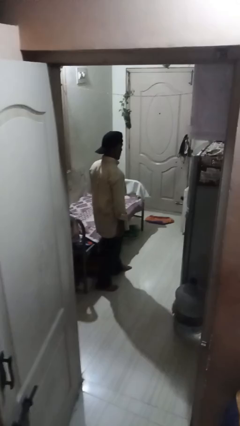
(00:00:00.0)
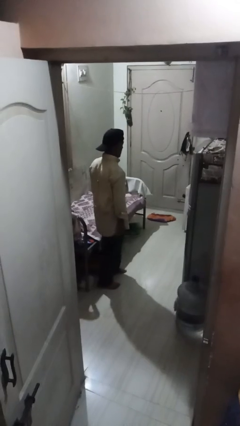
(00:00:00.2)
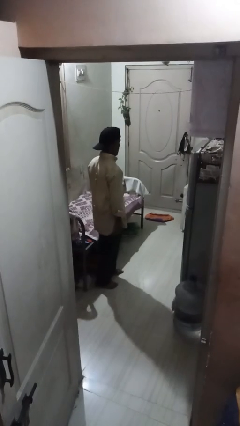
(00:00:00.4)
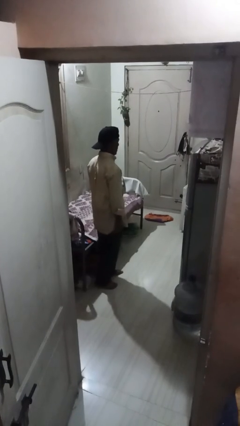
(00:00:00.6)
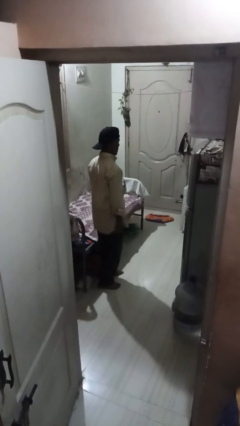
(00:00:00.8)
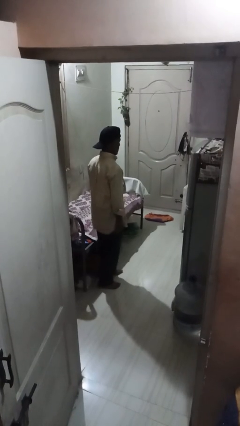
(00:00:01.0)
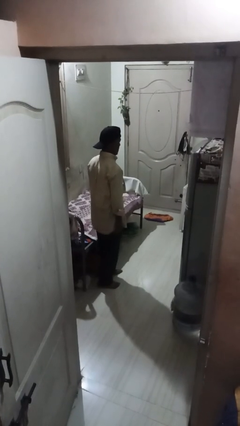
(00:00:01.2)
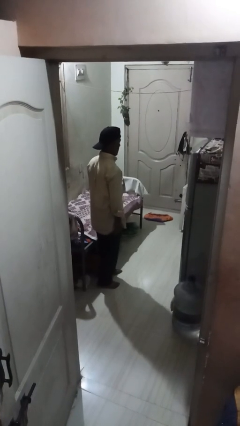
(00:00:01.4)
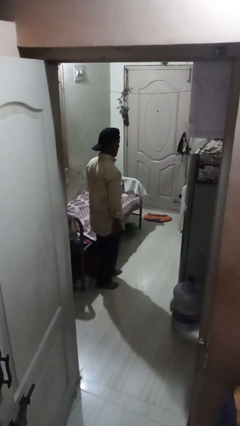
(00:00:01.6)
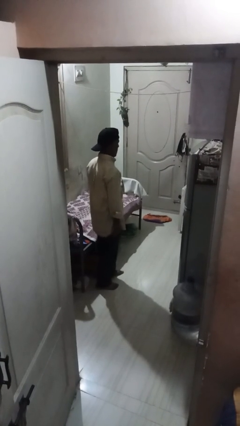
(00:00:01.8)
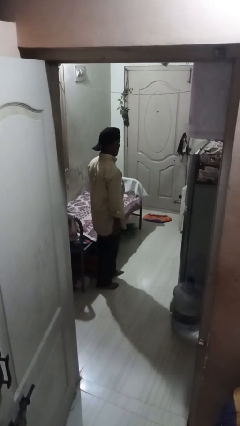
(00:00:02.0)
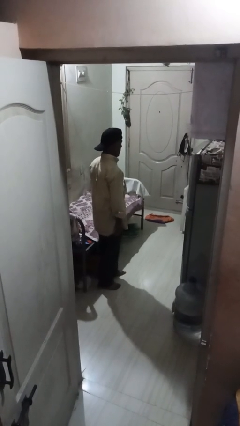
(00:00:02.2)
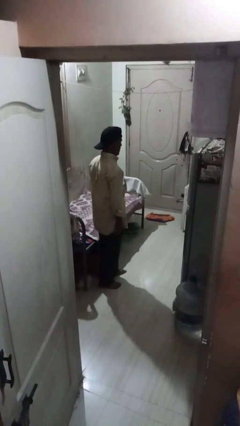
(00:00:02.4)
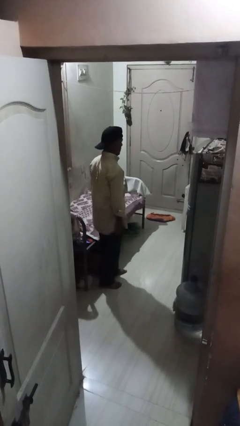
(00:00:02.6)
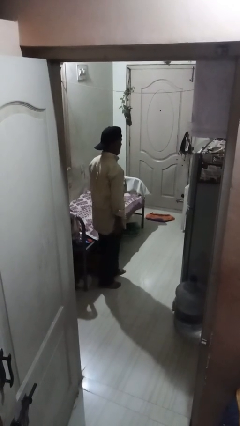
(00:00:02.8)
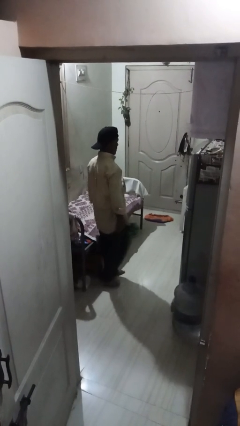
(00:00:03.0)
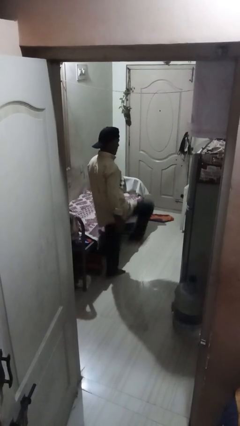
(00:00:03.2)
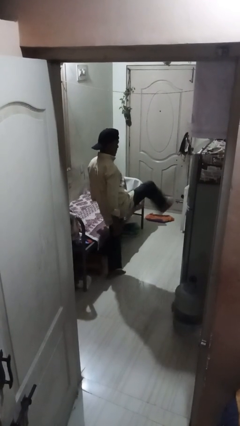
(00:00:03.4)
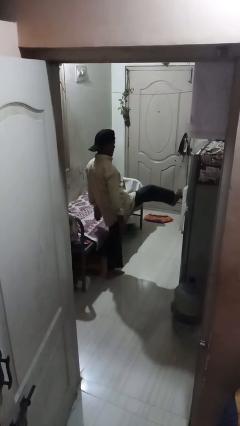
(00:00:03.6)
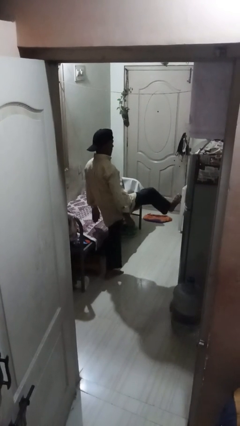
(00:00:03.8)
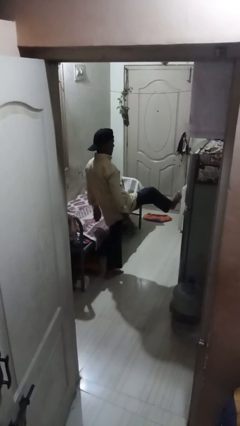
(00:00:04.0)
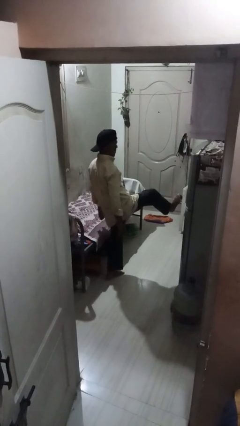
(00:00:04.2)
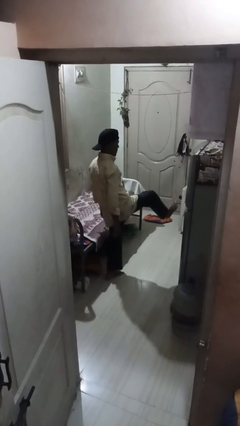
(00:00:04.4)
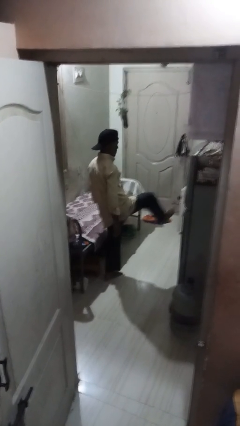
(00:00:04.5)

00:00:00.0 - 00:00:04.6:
person karate kicks

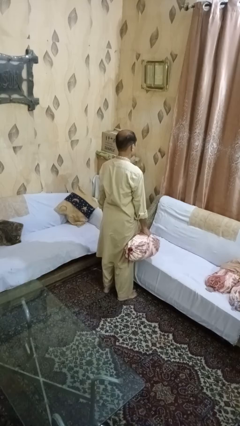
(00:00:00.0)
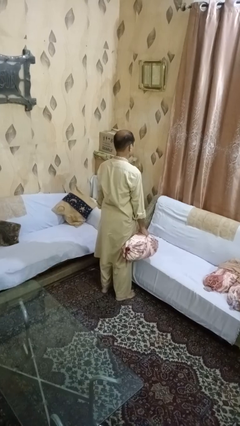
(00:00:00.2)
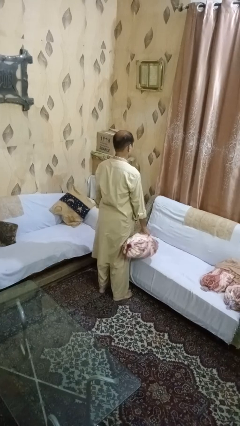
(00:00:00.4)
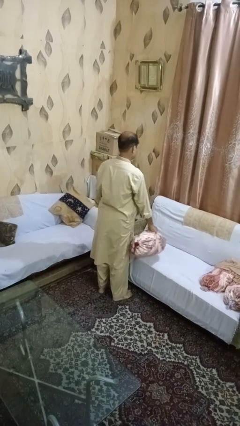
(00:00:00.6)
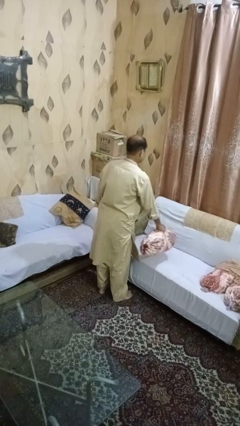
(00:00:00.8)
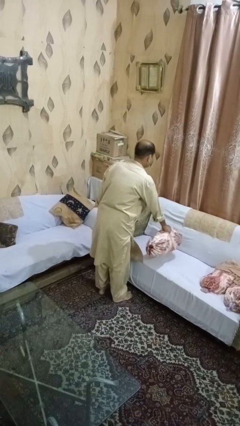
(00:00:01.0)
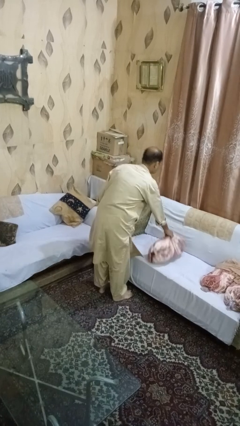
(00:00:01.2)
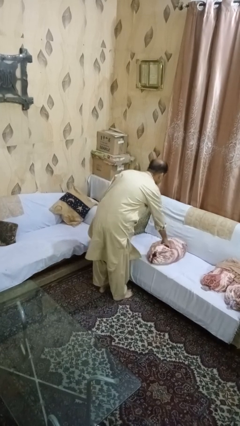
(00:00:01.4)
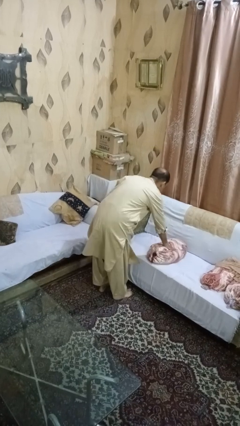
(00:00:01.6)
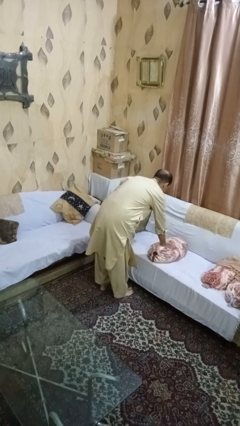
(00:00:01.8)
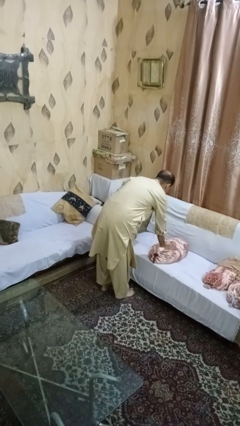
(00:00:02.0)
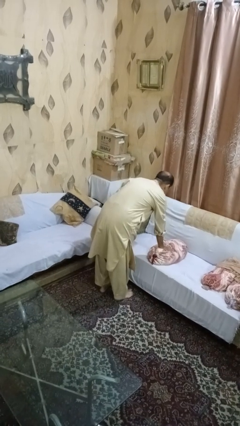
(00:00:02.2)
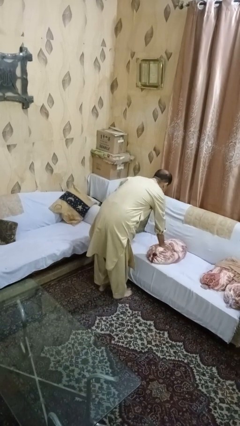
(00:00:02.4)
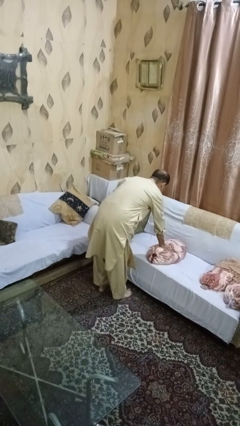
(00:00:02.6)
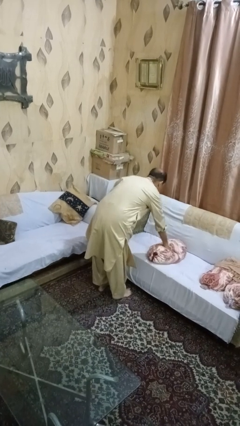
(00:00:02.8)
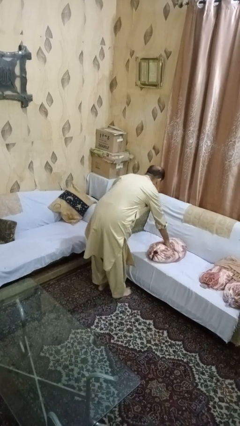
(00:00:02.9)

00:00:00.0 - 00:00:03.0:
person puts down object on couch

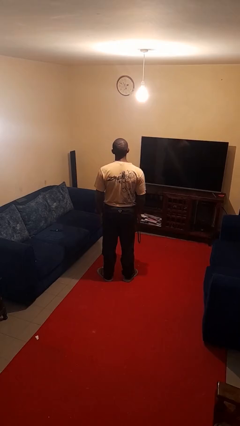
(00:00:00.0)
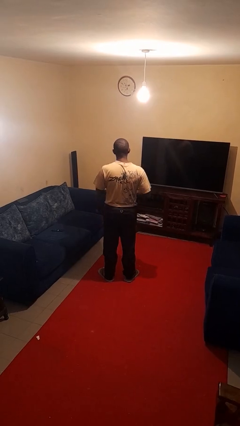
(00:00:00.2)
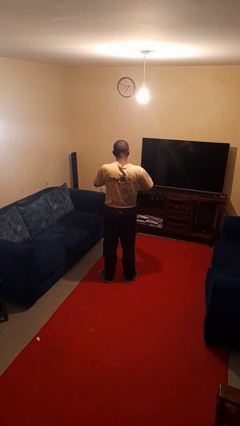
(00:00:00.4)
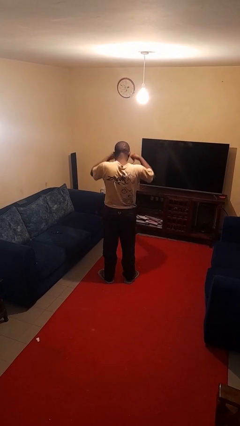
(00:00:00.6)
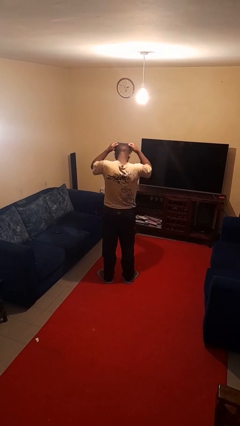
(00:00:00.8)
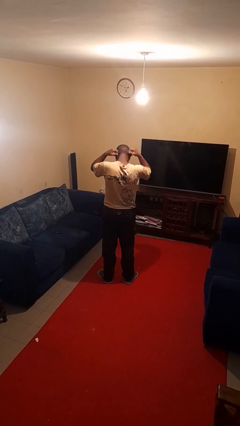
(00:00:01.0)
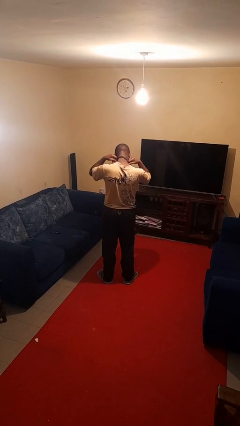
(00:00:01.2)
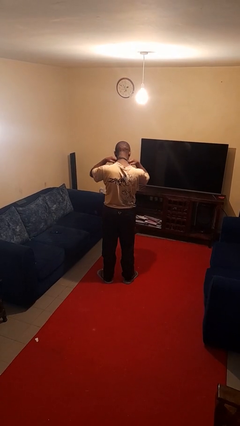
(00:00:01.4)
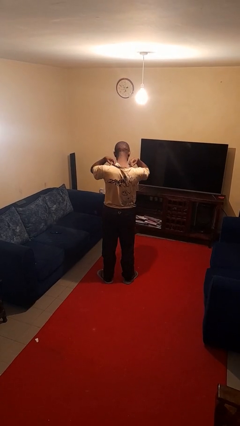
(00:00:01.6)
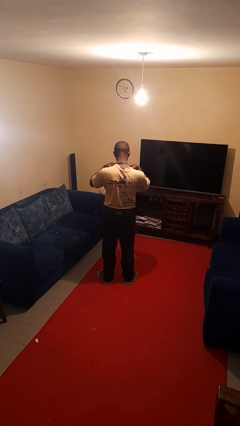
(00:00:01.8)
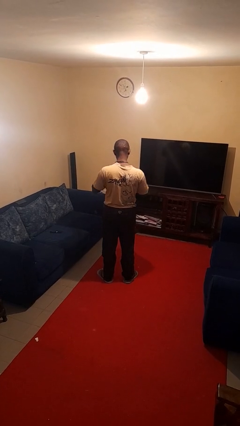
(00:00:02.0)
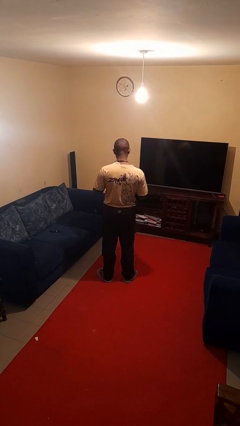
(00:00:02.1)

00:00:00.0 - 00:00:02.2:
person puts on necklace

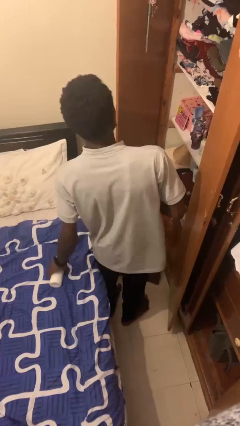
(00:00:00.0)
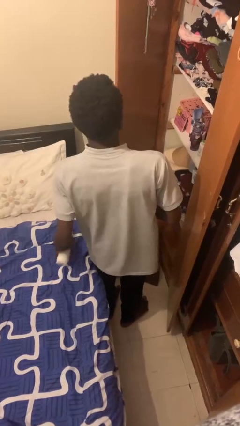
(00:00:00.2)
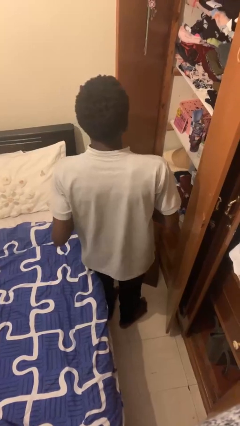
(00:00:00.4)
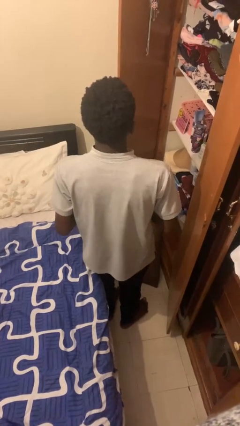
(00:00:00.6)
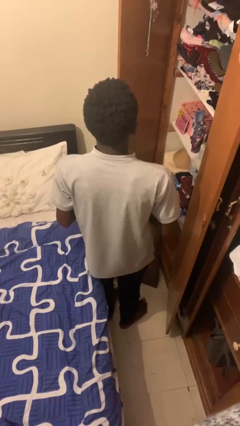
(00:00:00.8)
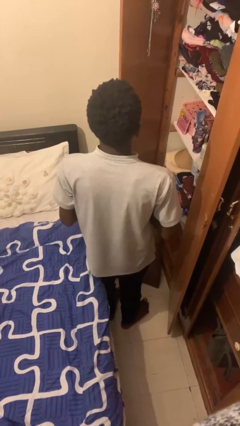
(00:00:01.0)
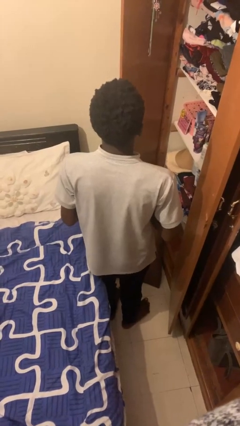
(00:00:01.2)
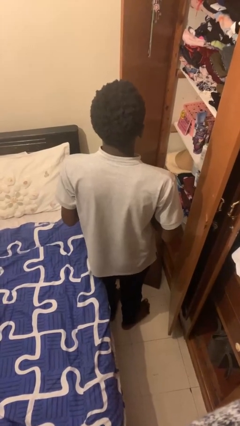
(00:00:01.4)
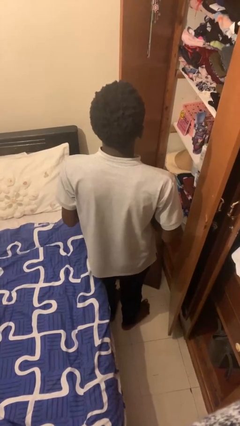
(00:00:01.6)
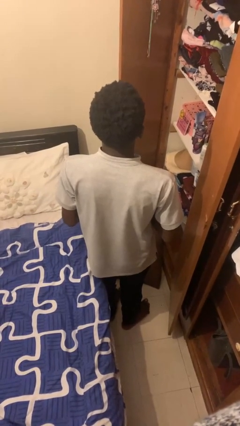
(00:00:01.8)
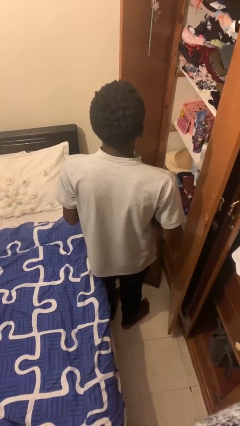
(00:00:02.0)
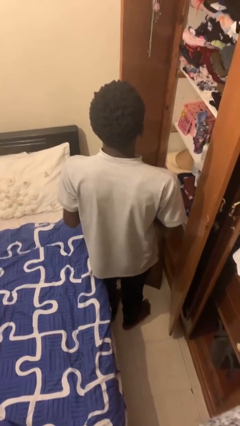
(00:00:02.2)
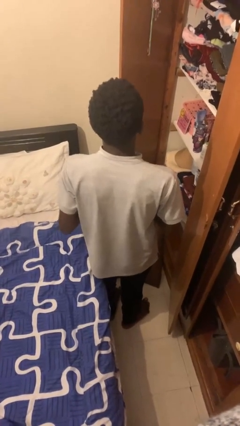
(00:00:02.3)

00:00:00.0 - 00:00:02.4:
person picks up object from cabinet

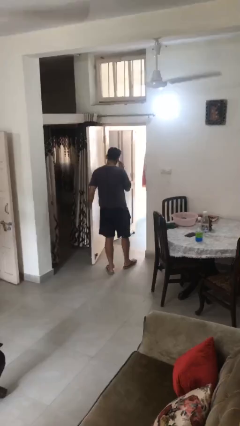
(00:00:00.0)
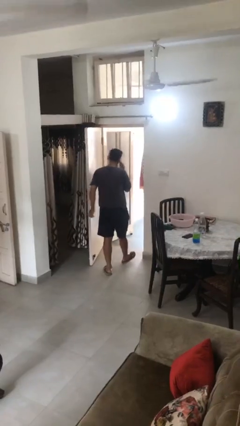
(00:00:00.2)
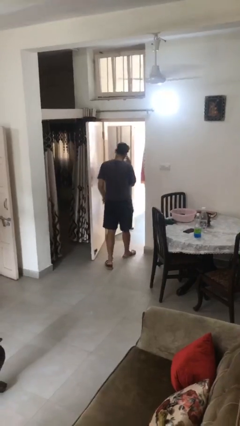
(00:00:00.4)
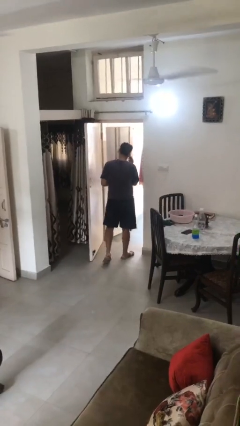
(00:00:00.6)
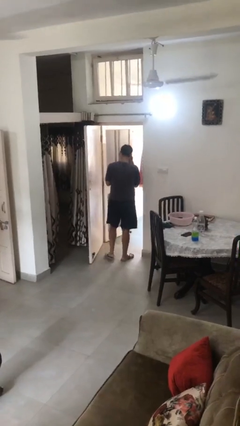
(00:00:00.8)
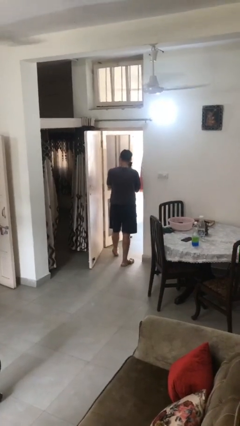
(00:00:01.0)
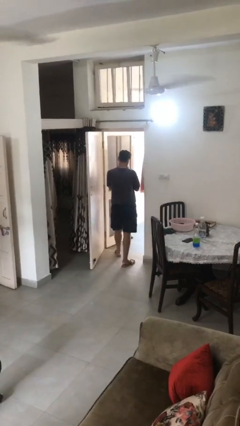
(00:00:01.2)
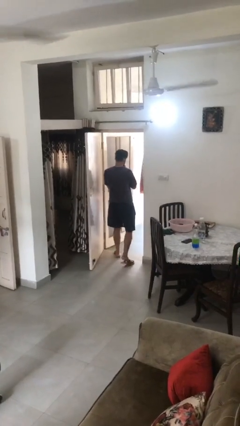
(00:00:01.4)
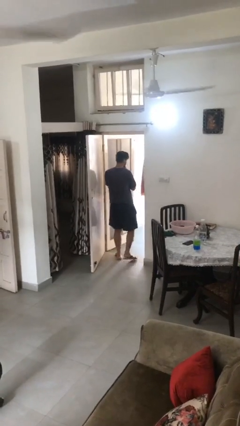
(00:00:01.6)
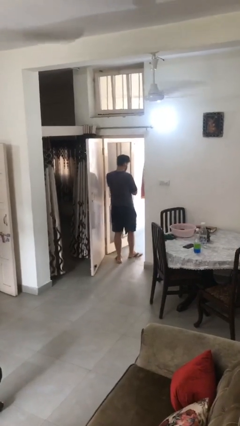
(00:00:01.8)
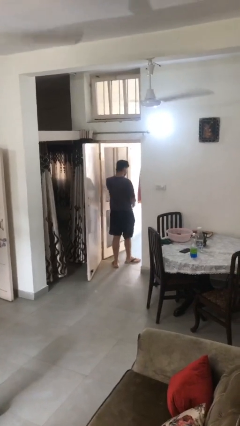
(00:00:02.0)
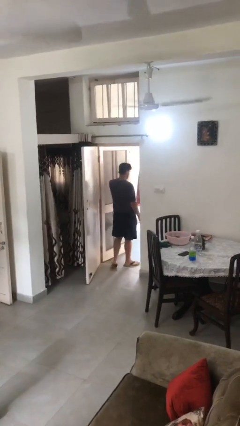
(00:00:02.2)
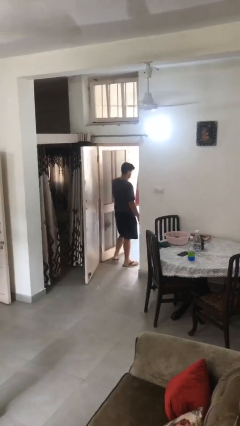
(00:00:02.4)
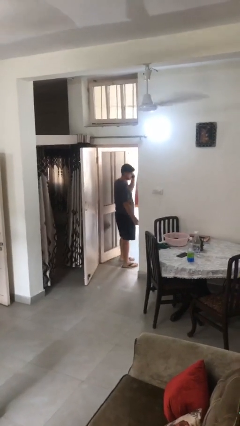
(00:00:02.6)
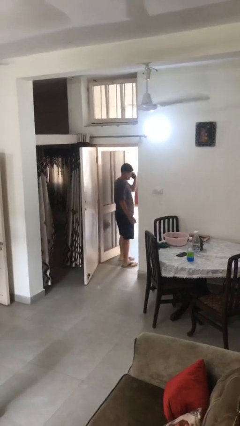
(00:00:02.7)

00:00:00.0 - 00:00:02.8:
person exits scene through structure

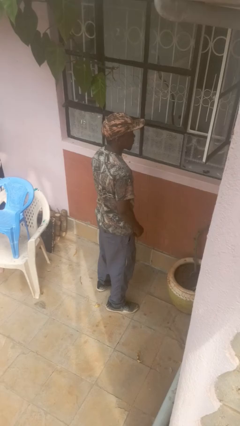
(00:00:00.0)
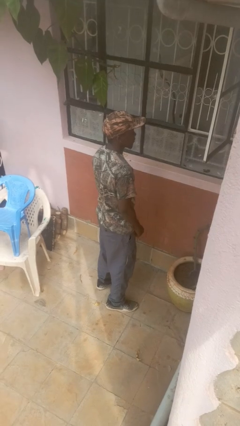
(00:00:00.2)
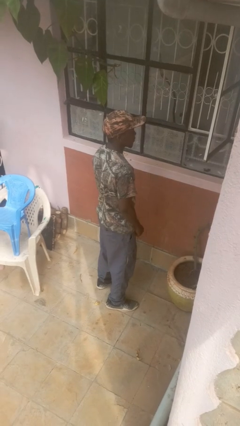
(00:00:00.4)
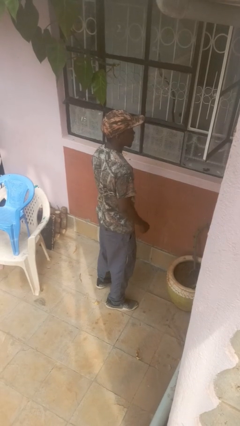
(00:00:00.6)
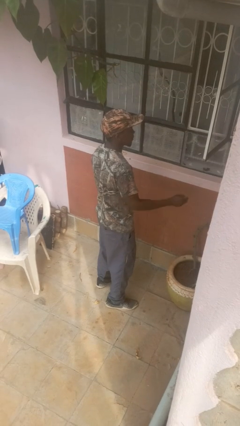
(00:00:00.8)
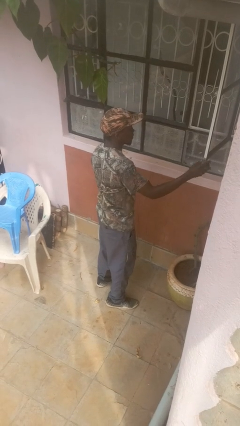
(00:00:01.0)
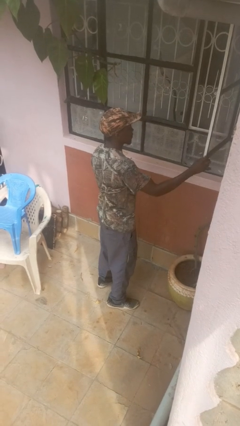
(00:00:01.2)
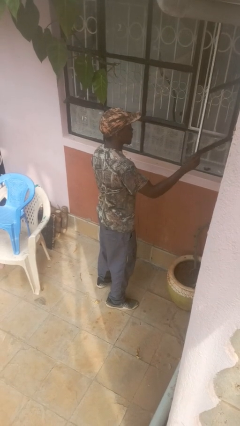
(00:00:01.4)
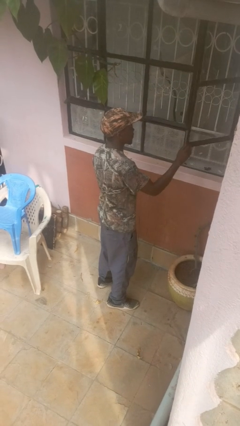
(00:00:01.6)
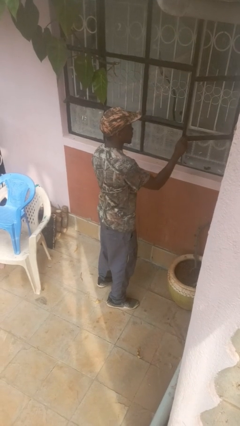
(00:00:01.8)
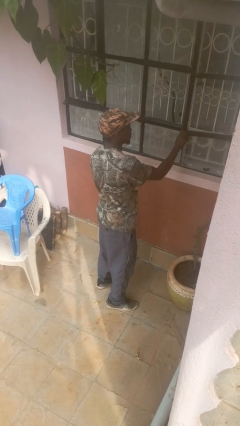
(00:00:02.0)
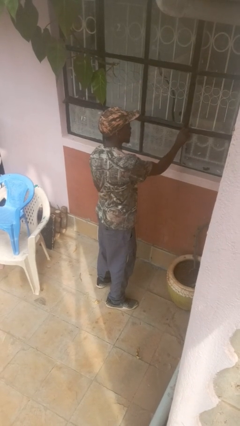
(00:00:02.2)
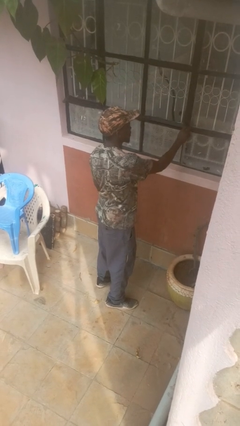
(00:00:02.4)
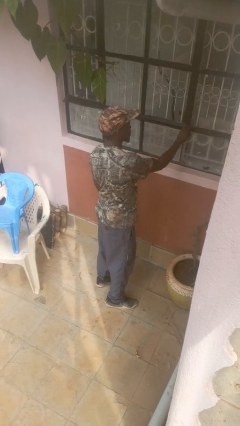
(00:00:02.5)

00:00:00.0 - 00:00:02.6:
person closes home window
